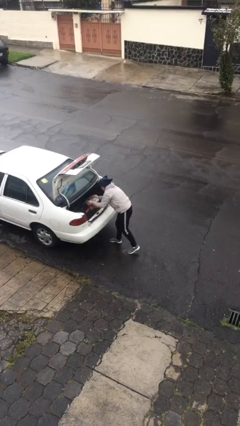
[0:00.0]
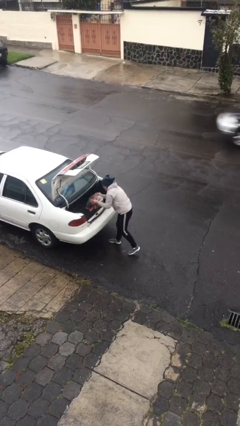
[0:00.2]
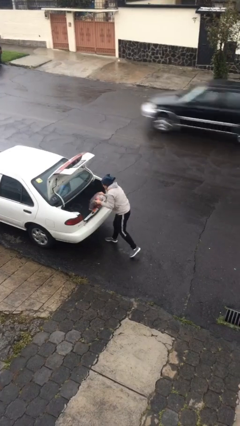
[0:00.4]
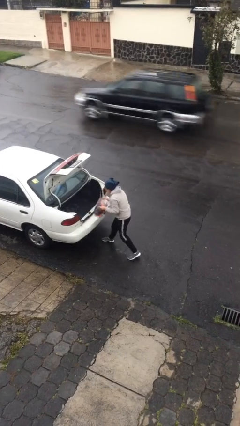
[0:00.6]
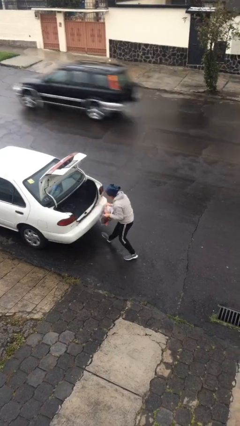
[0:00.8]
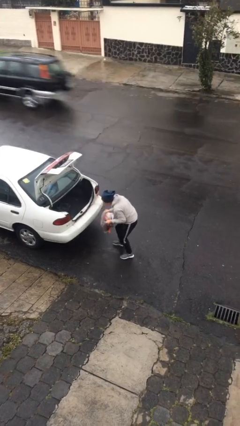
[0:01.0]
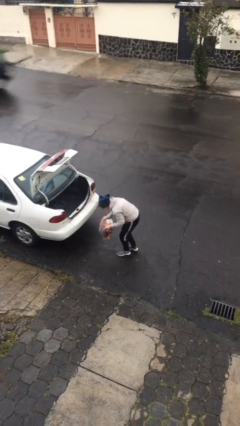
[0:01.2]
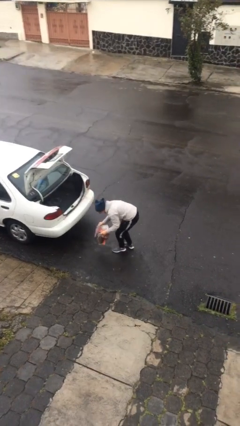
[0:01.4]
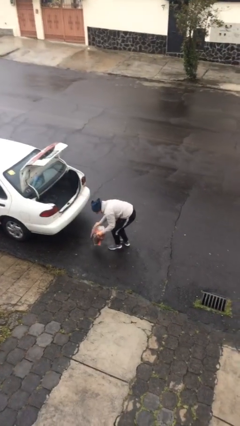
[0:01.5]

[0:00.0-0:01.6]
person unloads car

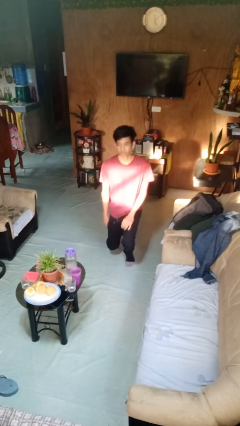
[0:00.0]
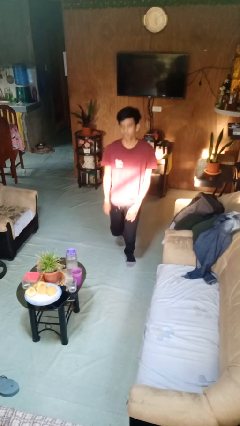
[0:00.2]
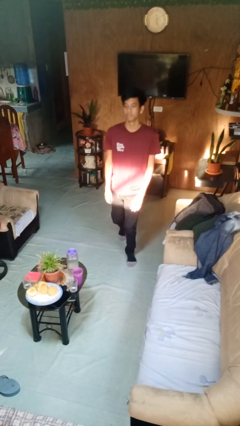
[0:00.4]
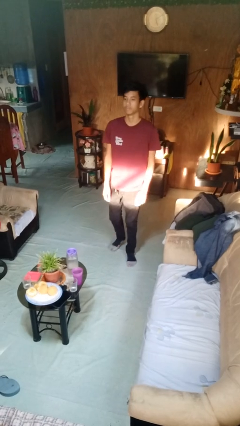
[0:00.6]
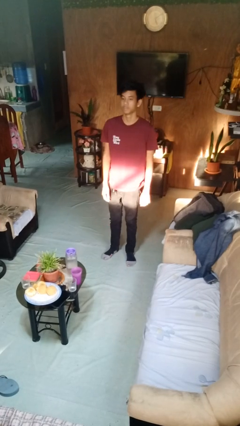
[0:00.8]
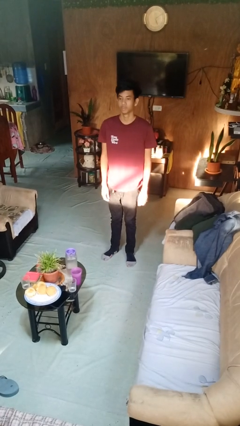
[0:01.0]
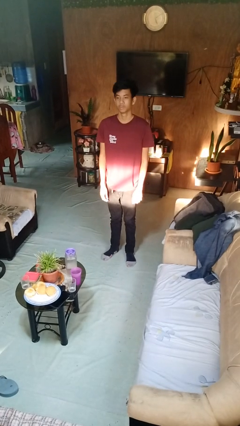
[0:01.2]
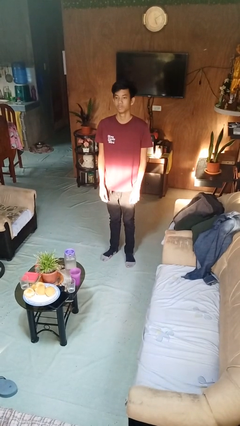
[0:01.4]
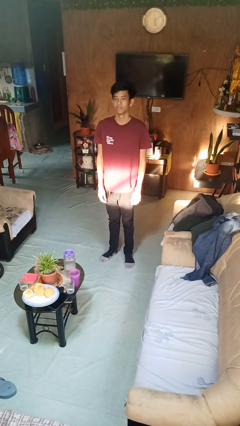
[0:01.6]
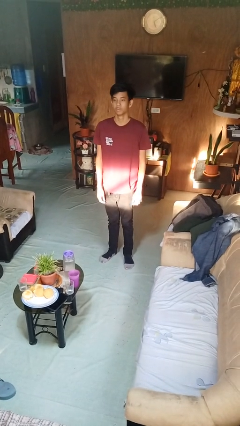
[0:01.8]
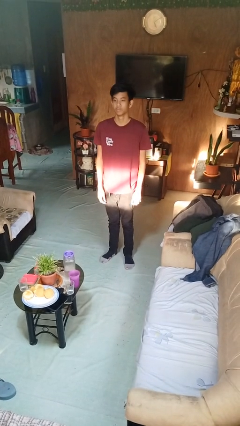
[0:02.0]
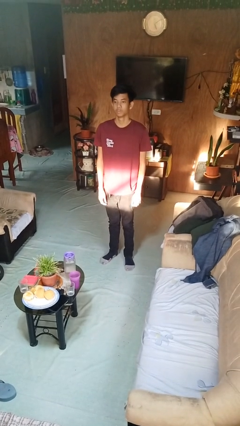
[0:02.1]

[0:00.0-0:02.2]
person stands up from floor

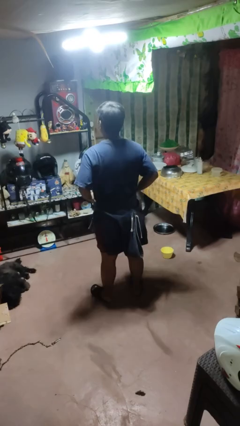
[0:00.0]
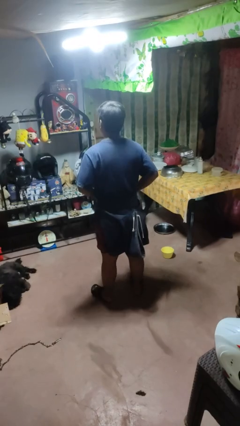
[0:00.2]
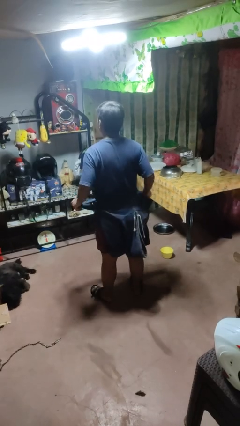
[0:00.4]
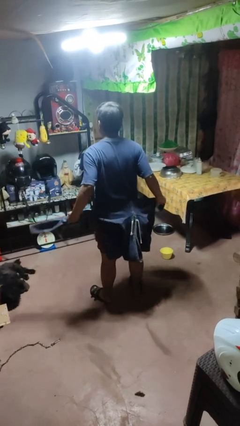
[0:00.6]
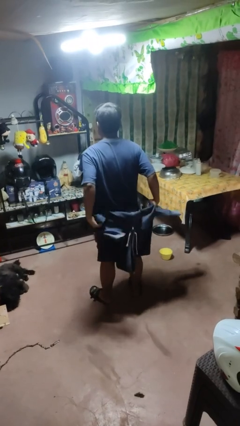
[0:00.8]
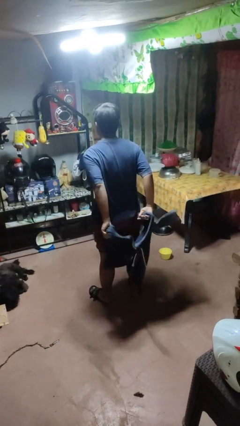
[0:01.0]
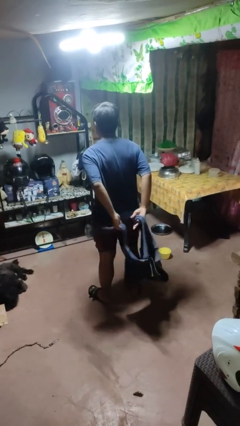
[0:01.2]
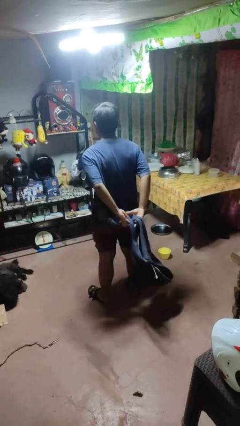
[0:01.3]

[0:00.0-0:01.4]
person unties jacket around waist

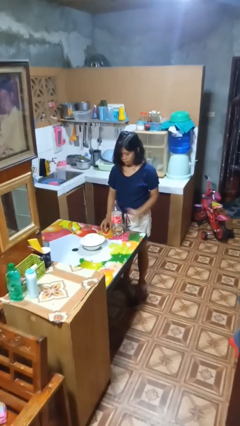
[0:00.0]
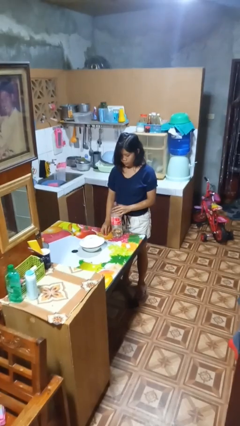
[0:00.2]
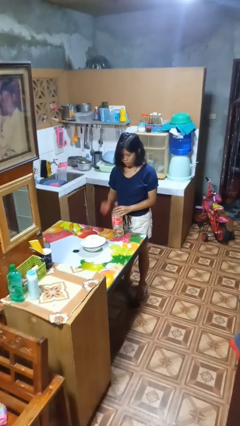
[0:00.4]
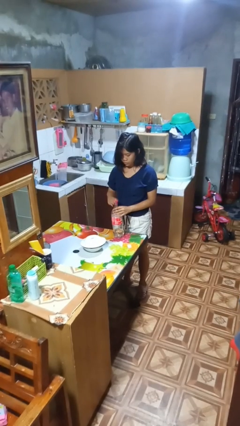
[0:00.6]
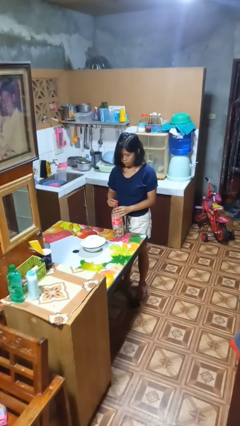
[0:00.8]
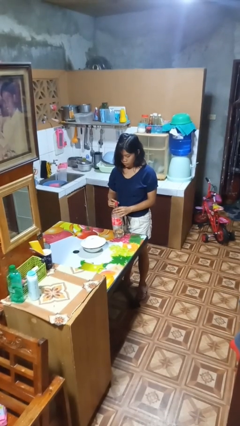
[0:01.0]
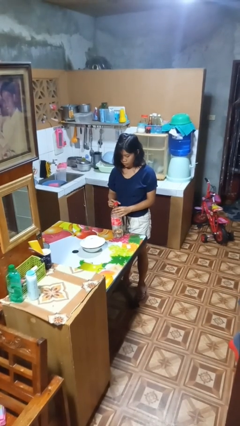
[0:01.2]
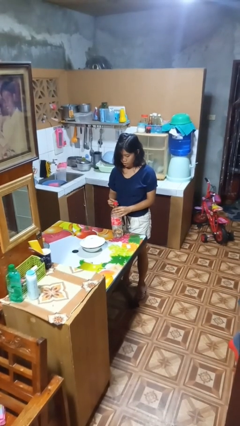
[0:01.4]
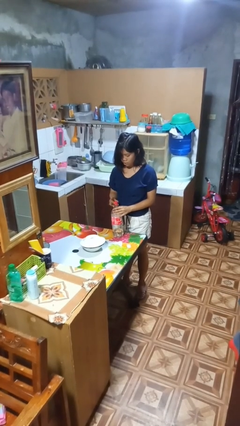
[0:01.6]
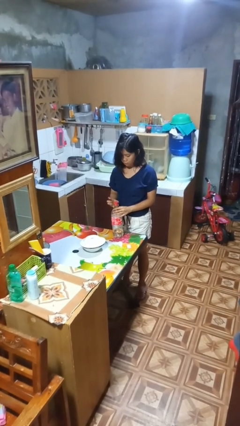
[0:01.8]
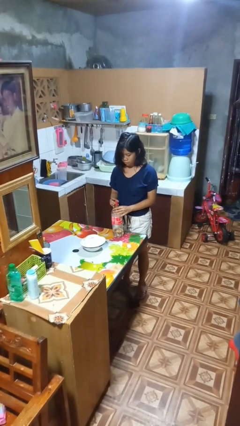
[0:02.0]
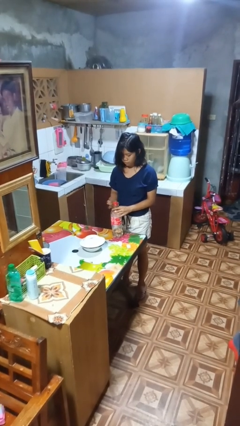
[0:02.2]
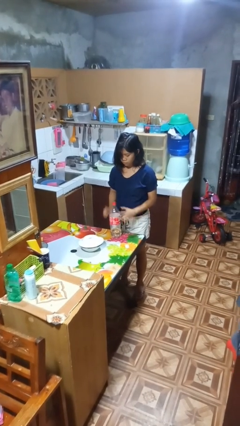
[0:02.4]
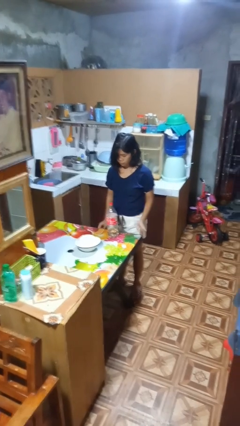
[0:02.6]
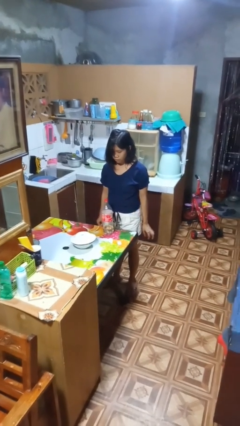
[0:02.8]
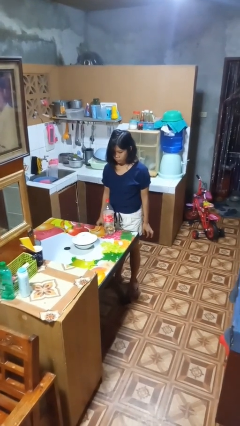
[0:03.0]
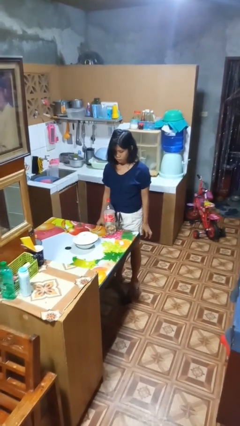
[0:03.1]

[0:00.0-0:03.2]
person screws lid to bottle

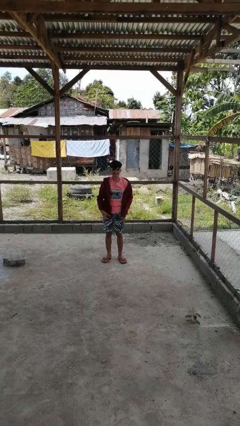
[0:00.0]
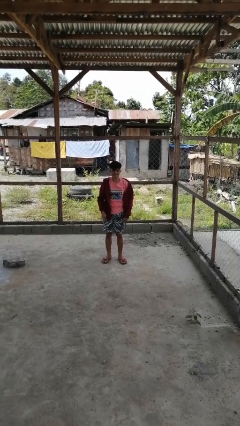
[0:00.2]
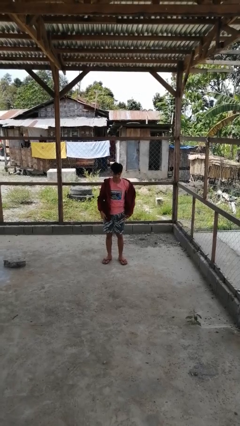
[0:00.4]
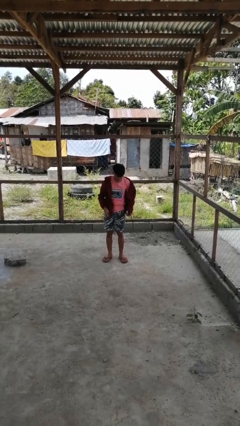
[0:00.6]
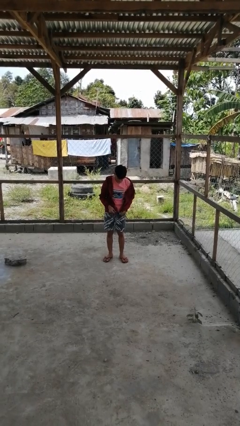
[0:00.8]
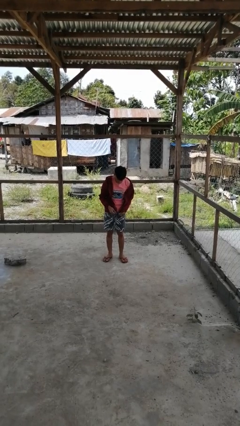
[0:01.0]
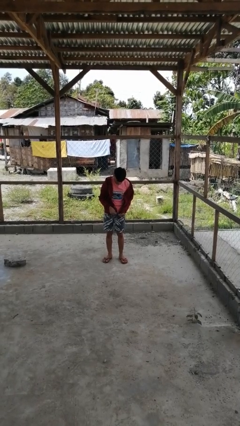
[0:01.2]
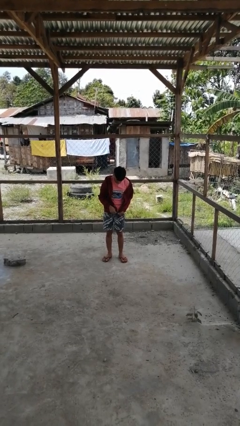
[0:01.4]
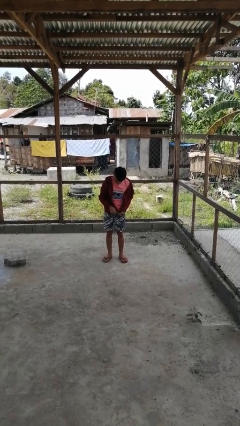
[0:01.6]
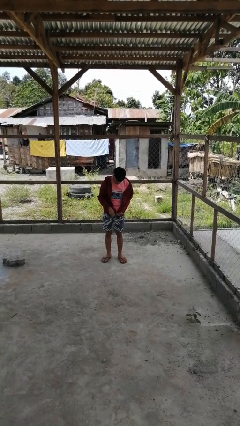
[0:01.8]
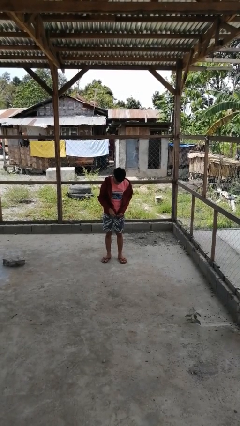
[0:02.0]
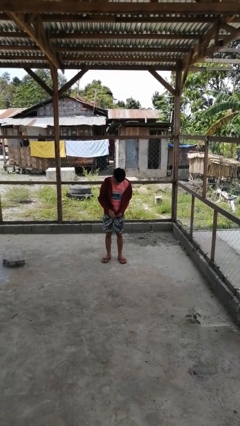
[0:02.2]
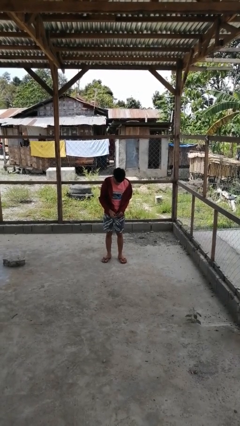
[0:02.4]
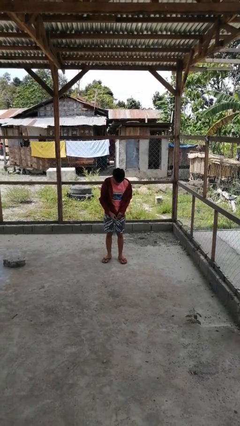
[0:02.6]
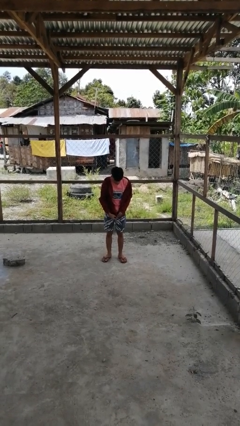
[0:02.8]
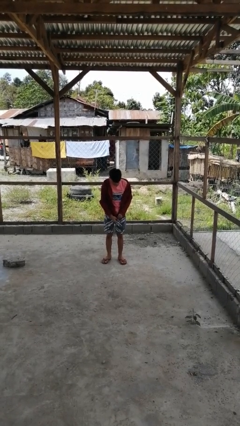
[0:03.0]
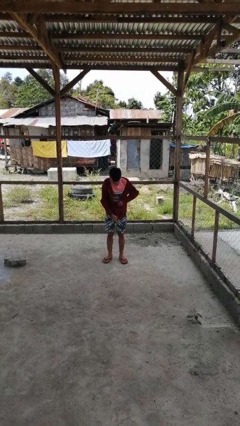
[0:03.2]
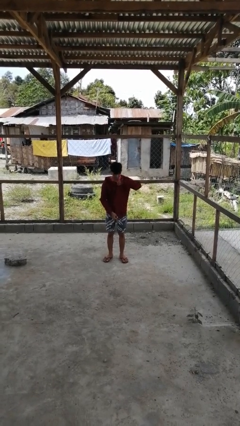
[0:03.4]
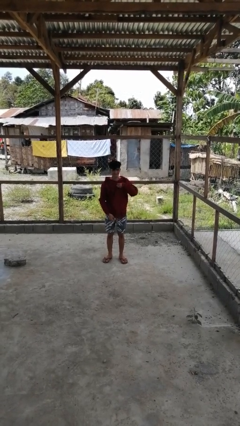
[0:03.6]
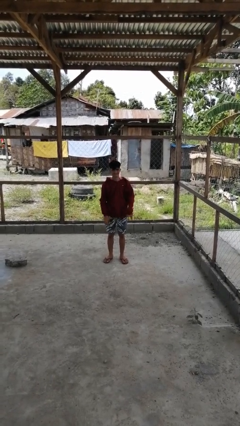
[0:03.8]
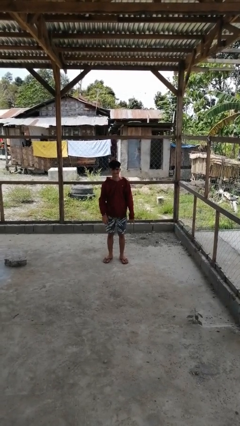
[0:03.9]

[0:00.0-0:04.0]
person zips up jacket

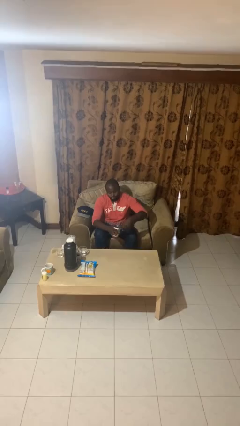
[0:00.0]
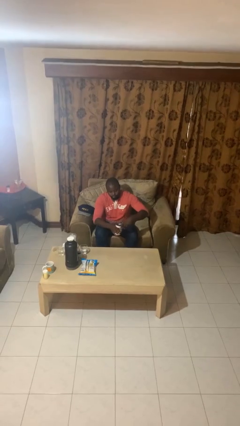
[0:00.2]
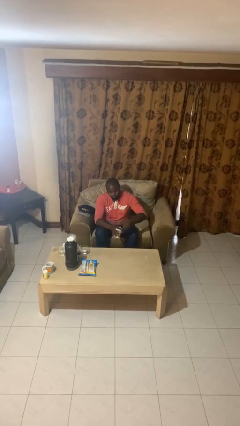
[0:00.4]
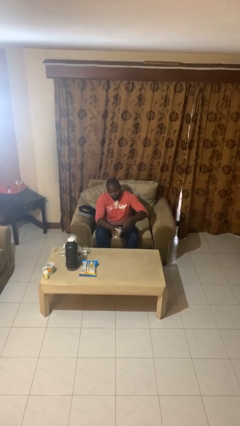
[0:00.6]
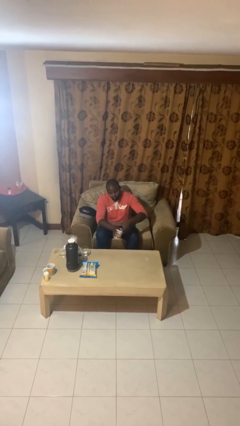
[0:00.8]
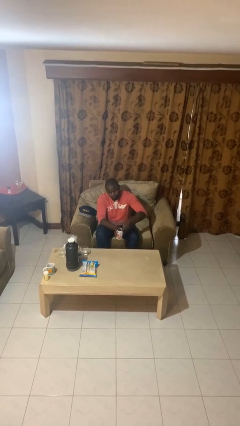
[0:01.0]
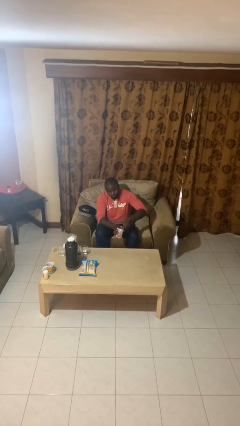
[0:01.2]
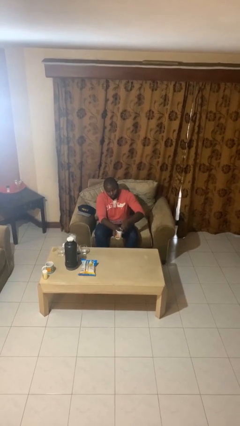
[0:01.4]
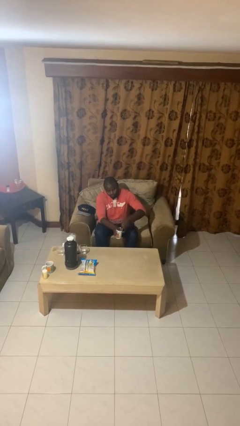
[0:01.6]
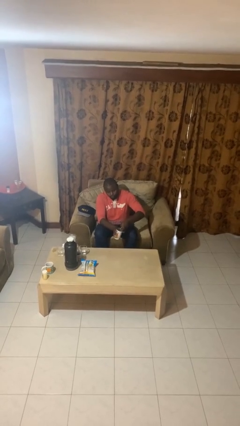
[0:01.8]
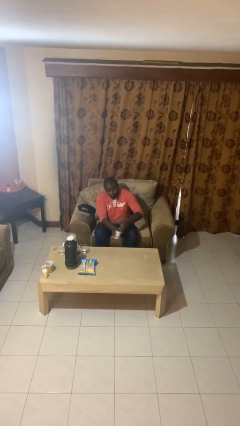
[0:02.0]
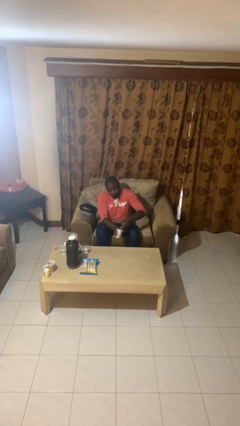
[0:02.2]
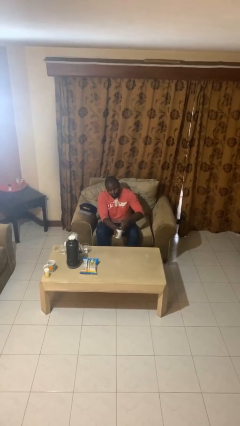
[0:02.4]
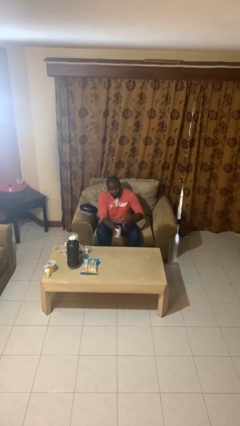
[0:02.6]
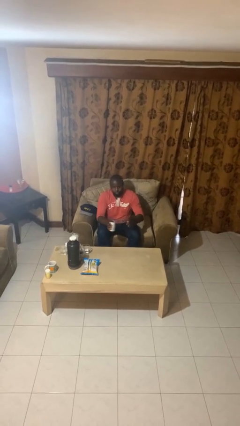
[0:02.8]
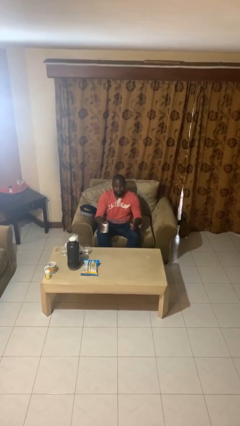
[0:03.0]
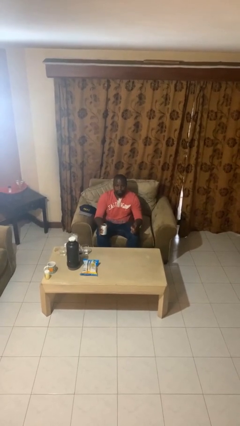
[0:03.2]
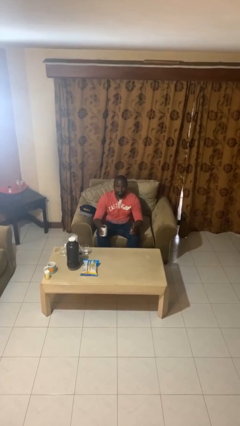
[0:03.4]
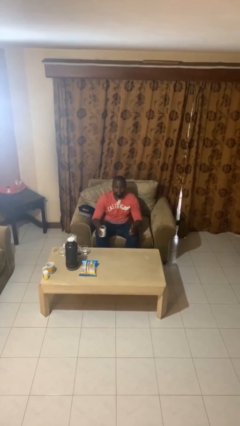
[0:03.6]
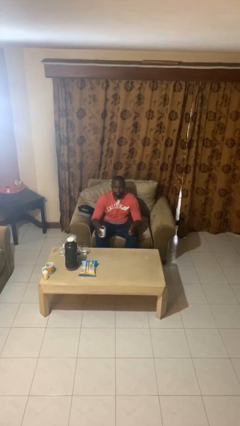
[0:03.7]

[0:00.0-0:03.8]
person opens can with can opener

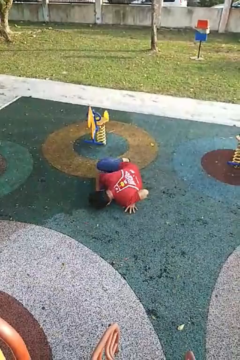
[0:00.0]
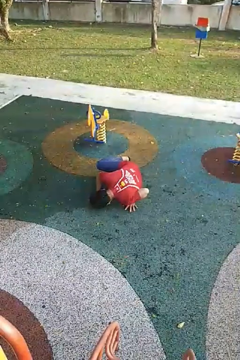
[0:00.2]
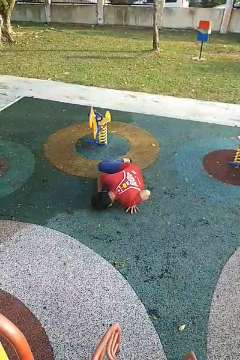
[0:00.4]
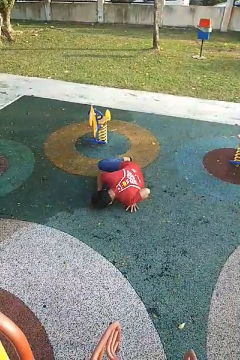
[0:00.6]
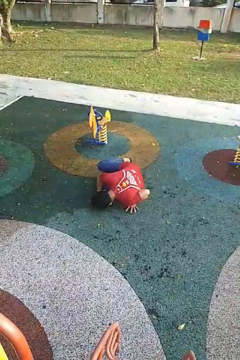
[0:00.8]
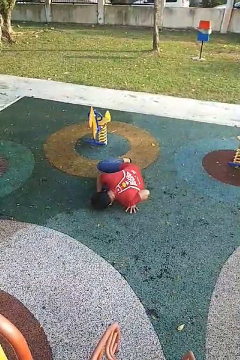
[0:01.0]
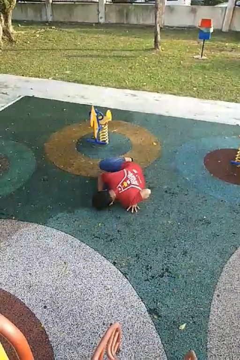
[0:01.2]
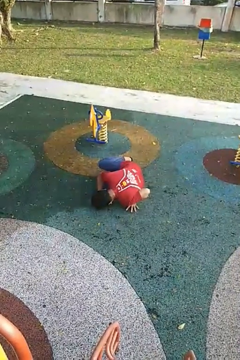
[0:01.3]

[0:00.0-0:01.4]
person lies down on floor

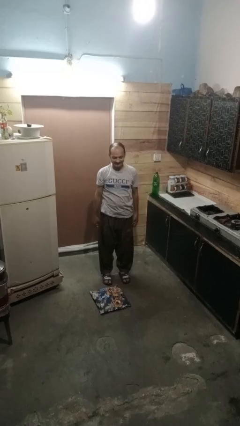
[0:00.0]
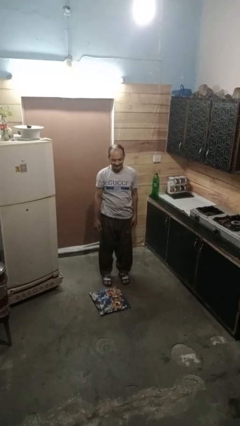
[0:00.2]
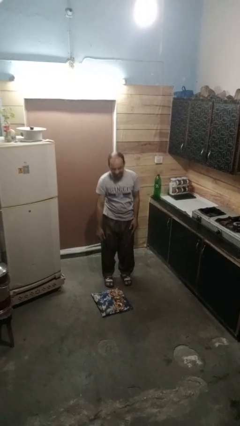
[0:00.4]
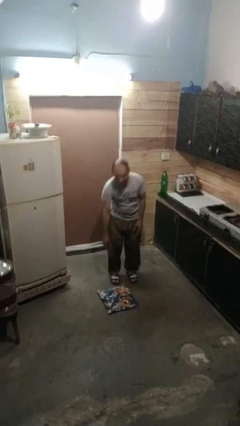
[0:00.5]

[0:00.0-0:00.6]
person picks up object from floor
